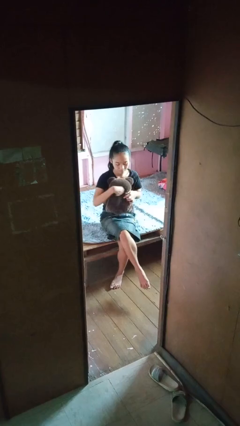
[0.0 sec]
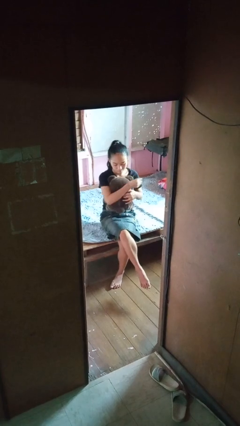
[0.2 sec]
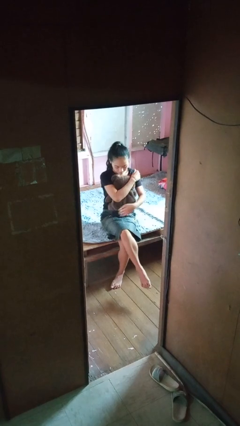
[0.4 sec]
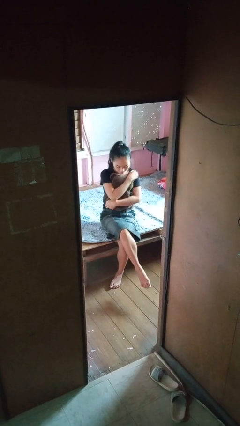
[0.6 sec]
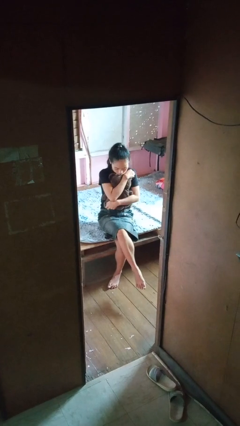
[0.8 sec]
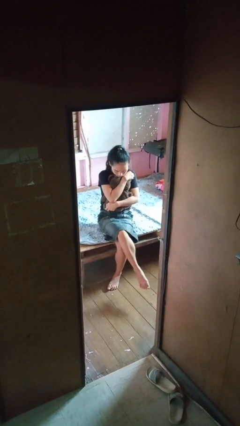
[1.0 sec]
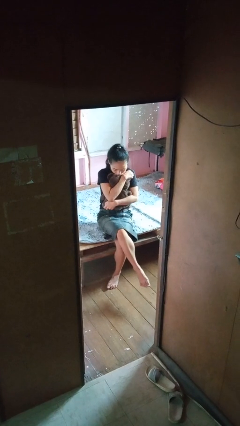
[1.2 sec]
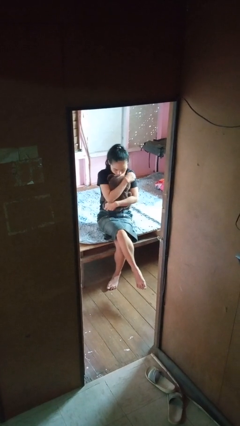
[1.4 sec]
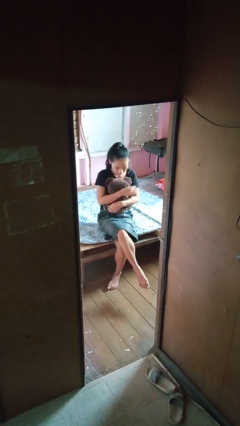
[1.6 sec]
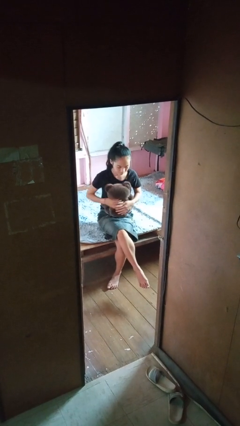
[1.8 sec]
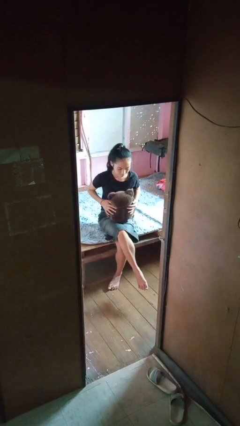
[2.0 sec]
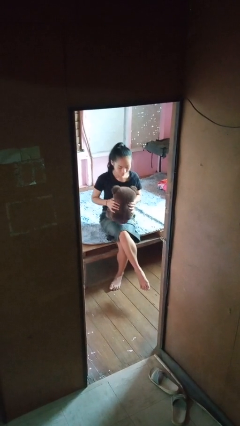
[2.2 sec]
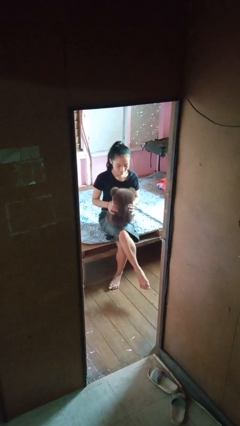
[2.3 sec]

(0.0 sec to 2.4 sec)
person hugs stuffed animal

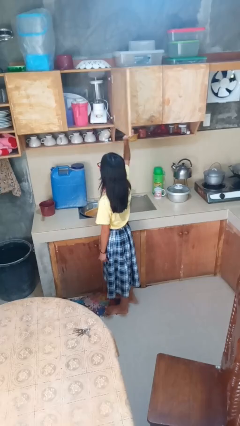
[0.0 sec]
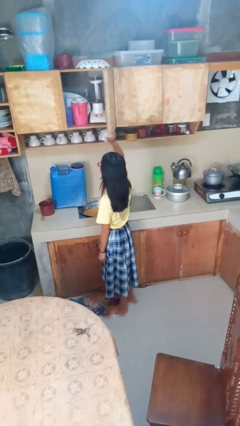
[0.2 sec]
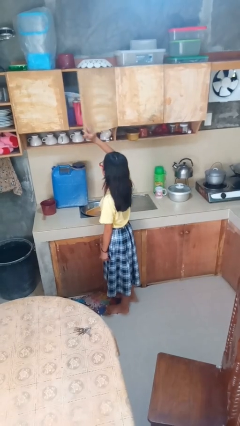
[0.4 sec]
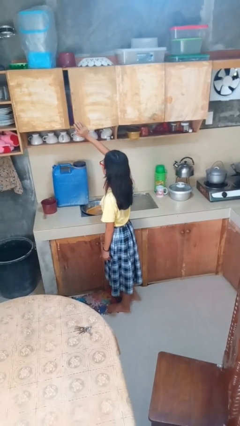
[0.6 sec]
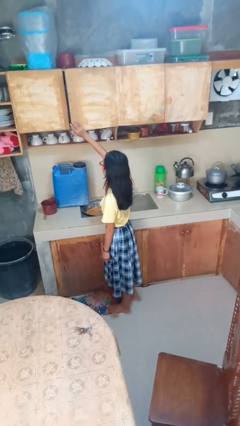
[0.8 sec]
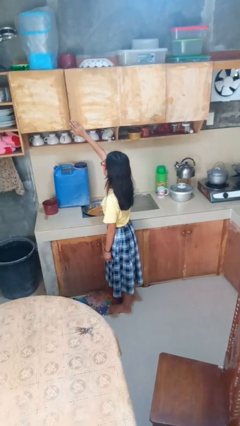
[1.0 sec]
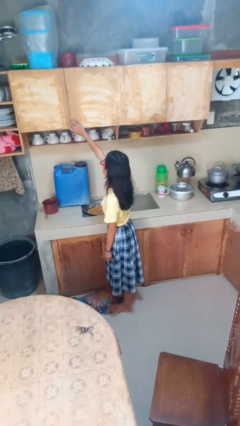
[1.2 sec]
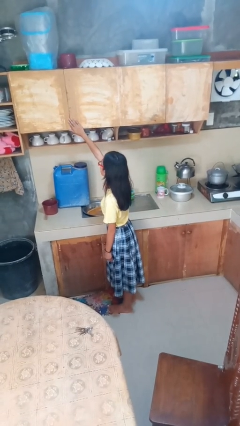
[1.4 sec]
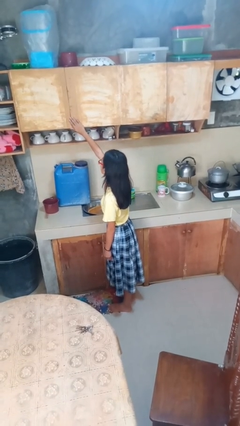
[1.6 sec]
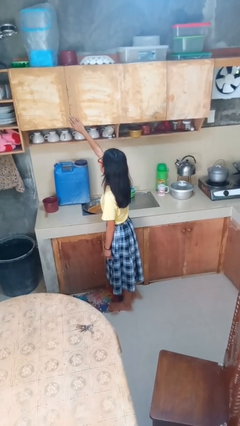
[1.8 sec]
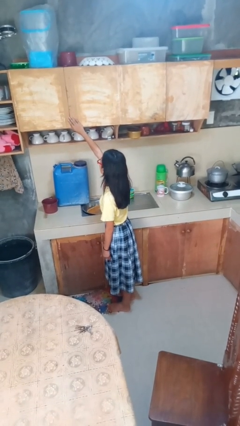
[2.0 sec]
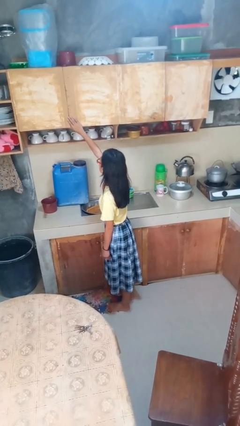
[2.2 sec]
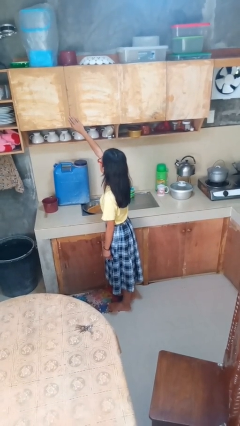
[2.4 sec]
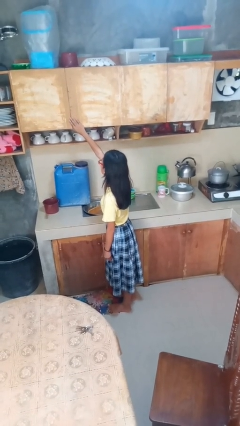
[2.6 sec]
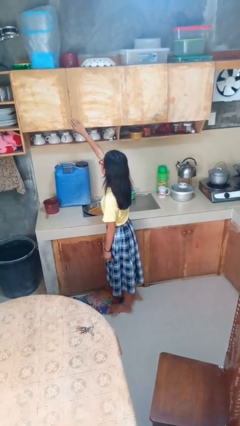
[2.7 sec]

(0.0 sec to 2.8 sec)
person closes cabinet

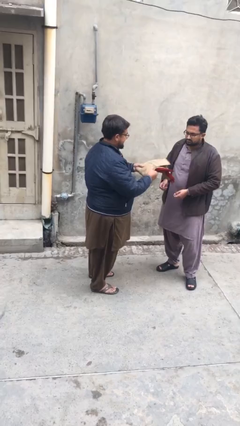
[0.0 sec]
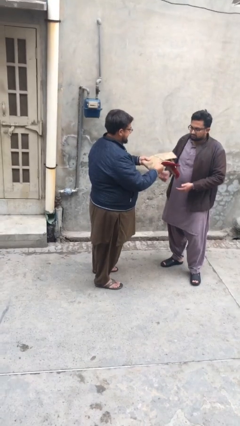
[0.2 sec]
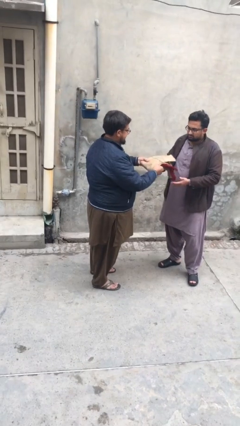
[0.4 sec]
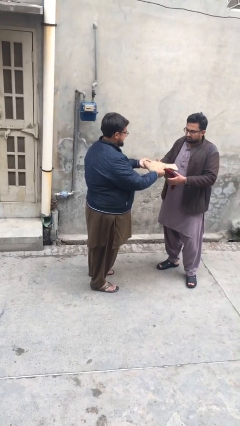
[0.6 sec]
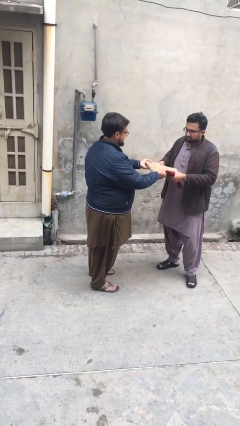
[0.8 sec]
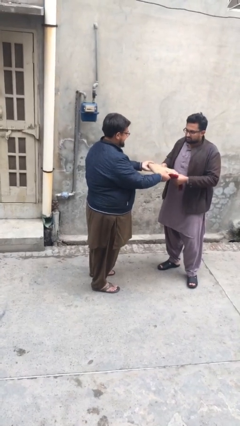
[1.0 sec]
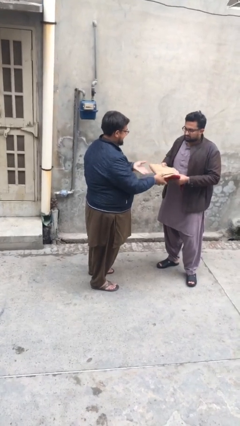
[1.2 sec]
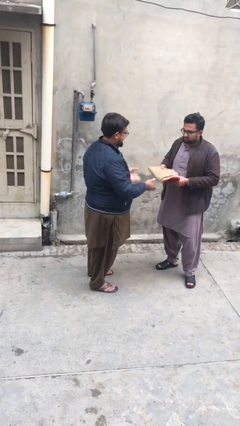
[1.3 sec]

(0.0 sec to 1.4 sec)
person transfers object to person

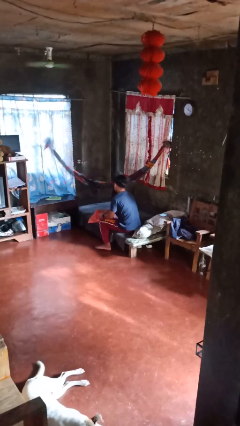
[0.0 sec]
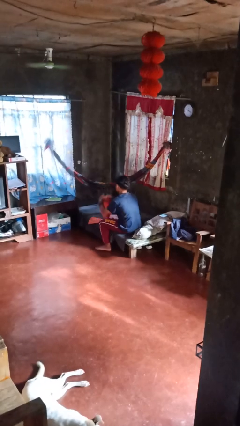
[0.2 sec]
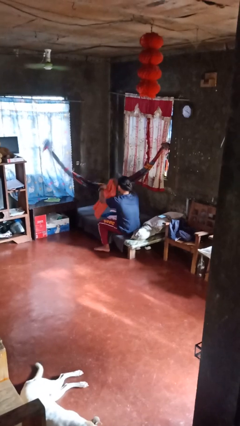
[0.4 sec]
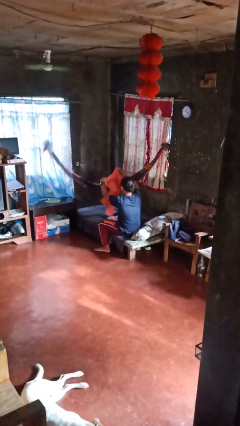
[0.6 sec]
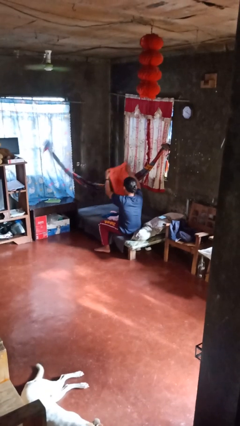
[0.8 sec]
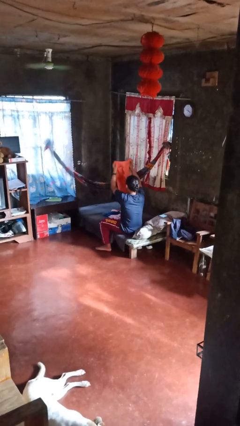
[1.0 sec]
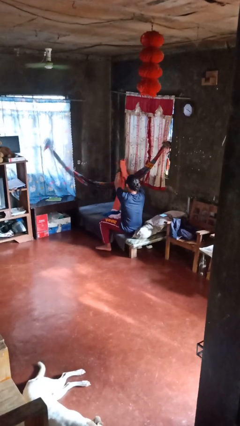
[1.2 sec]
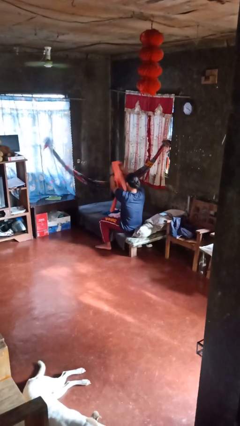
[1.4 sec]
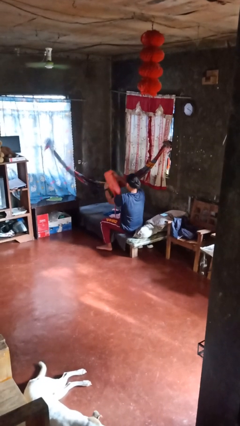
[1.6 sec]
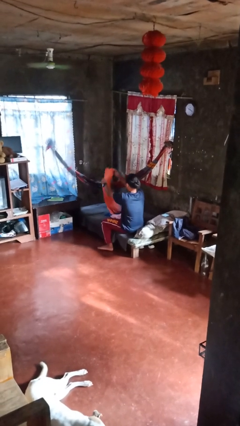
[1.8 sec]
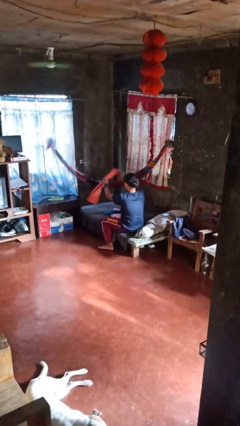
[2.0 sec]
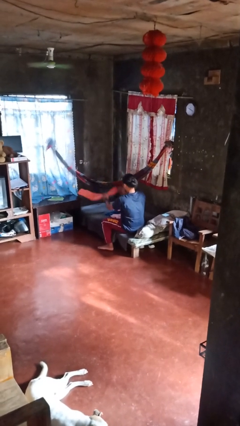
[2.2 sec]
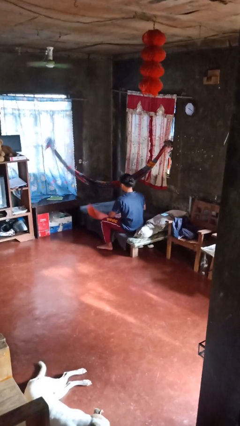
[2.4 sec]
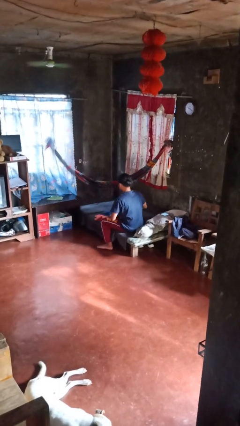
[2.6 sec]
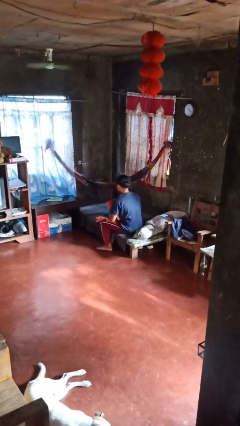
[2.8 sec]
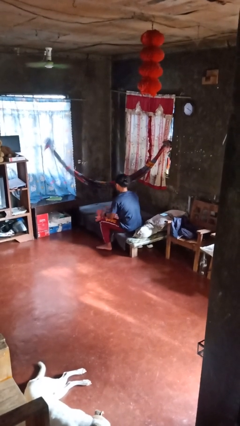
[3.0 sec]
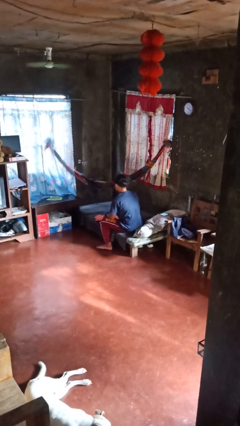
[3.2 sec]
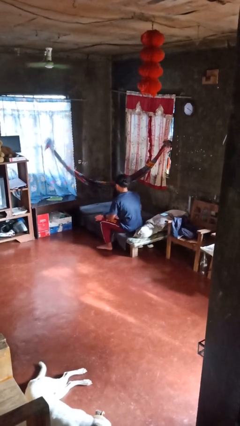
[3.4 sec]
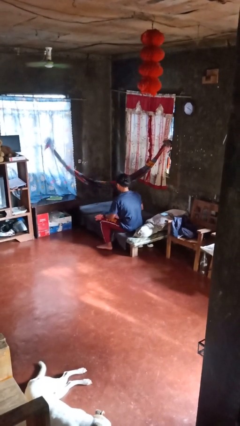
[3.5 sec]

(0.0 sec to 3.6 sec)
person folds pants

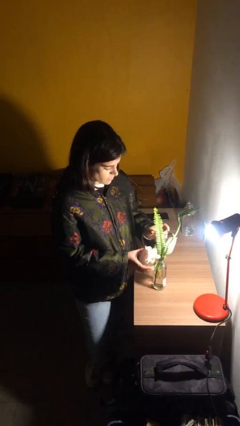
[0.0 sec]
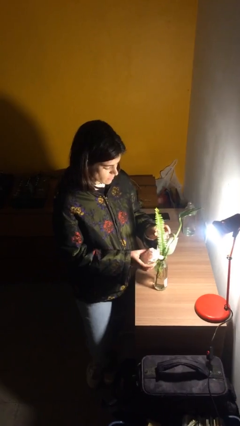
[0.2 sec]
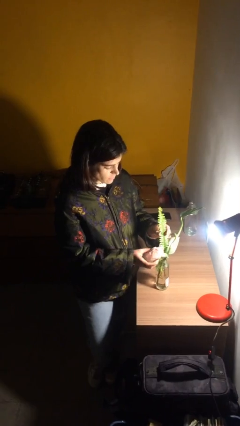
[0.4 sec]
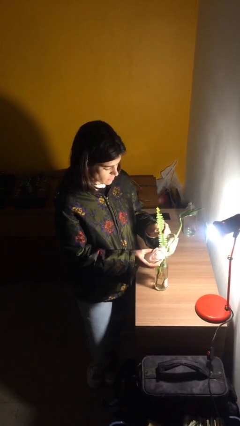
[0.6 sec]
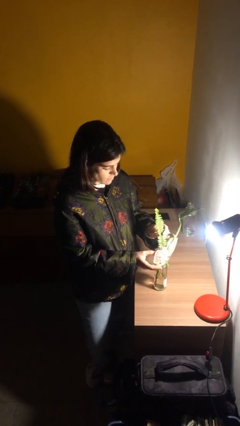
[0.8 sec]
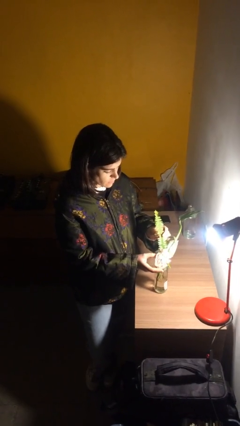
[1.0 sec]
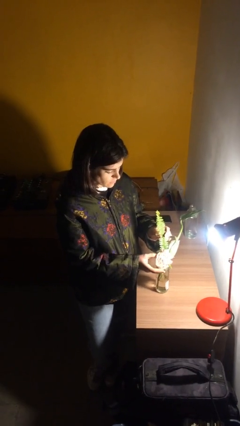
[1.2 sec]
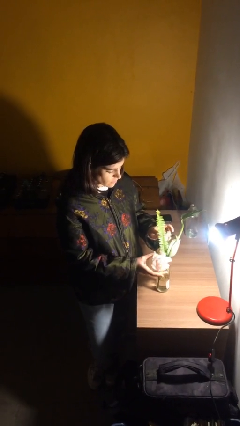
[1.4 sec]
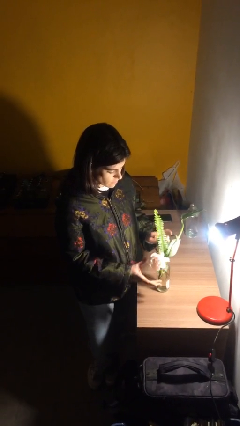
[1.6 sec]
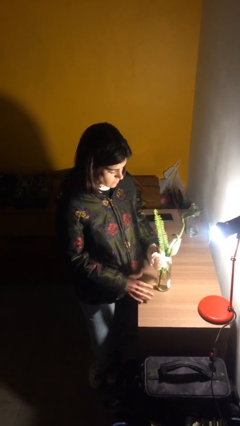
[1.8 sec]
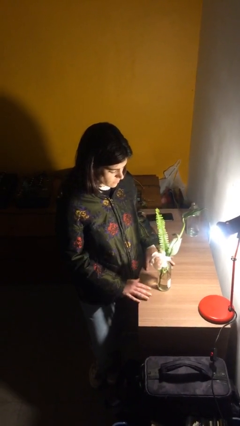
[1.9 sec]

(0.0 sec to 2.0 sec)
person arranges flowers in vase

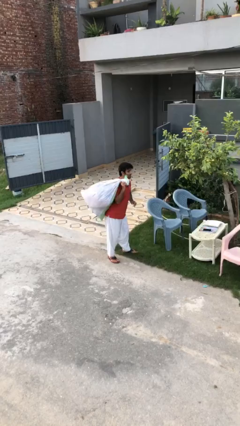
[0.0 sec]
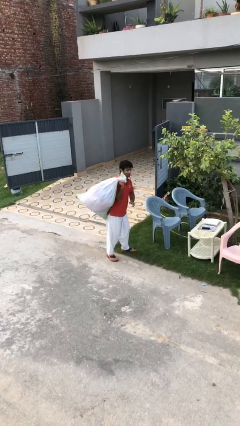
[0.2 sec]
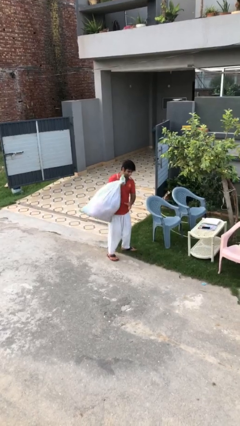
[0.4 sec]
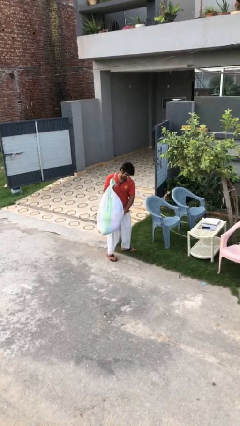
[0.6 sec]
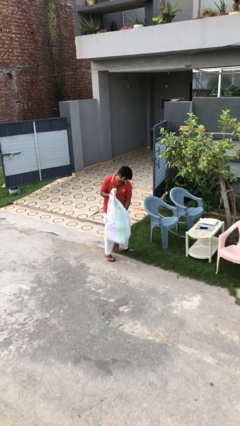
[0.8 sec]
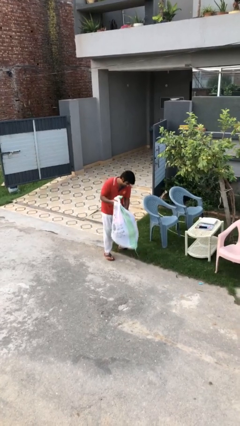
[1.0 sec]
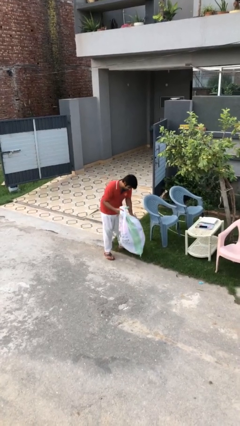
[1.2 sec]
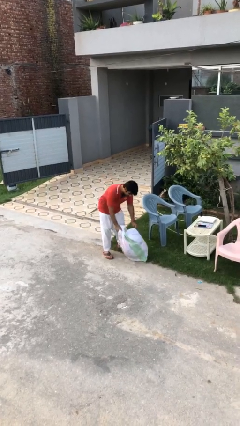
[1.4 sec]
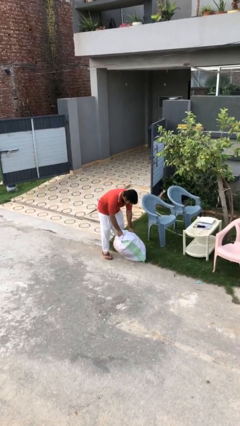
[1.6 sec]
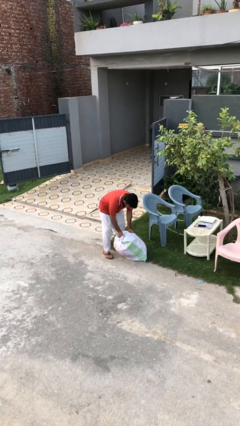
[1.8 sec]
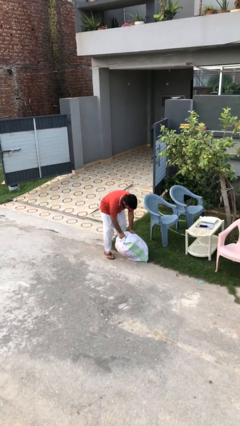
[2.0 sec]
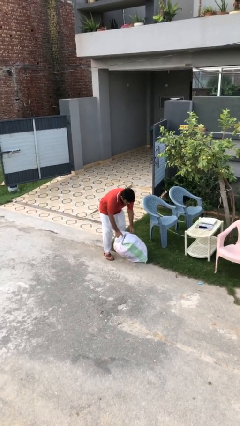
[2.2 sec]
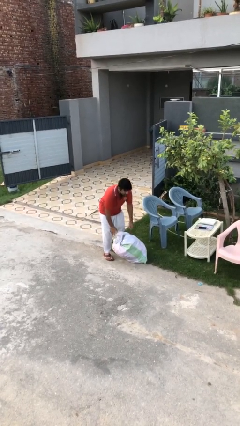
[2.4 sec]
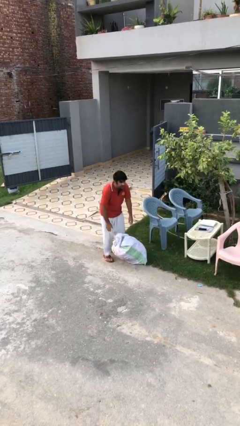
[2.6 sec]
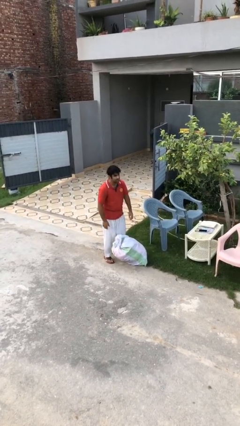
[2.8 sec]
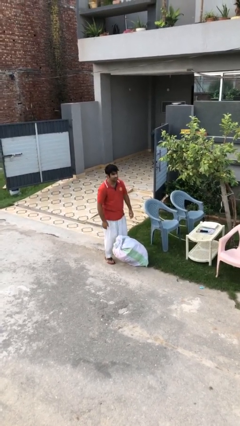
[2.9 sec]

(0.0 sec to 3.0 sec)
person puts down object on floor

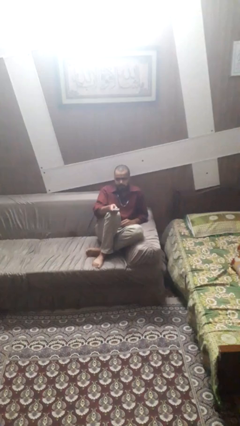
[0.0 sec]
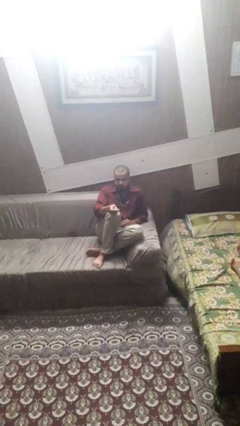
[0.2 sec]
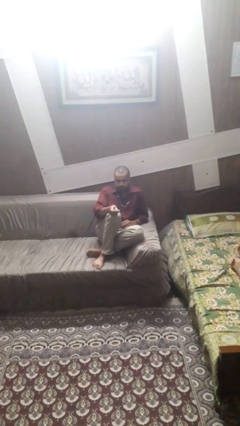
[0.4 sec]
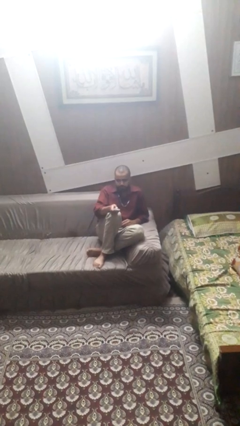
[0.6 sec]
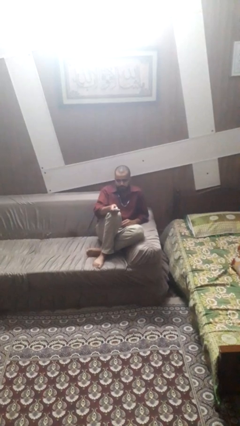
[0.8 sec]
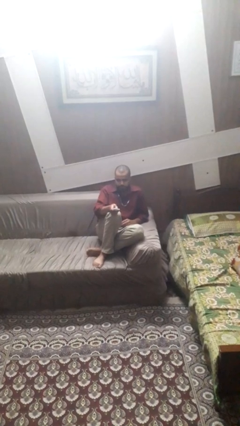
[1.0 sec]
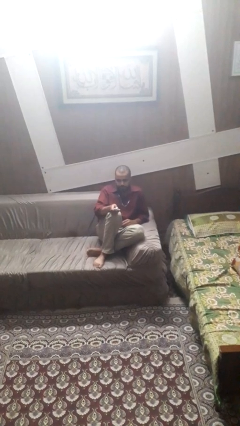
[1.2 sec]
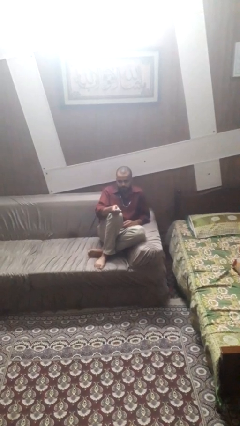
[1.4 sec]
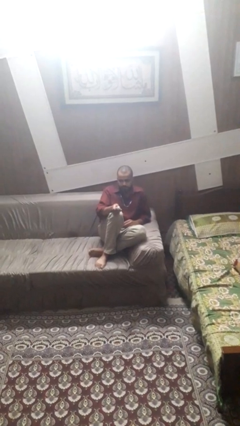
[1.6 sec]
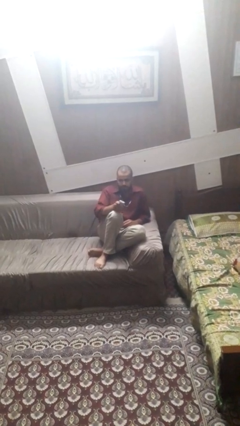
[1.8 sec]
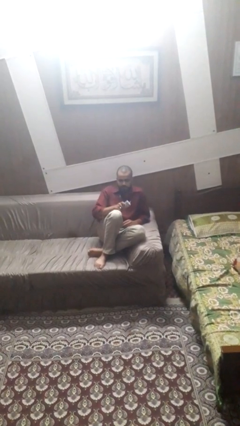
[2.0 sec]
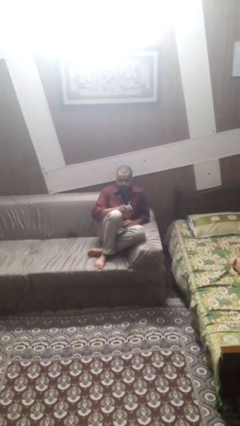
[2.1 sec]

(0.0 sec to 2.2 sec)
person uses television remote
